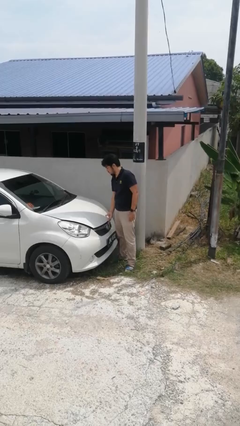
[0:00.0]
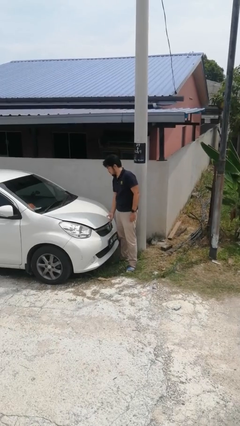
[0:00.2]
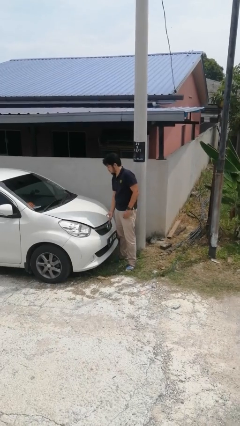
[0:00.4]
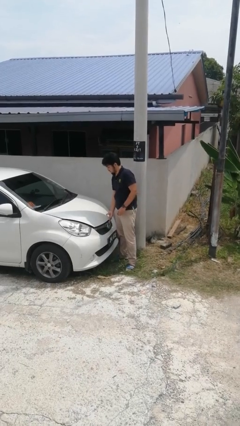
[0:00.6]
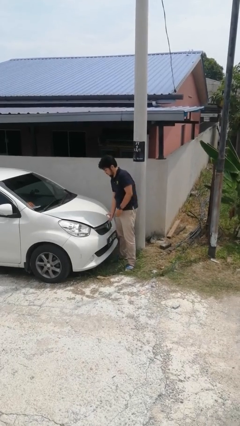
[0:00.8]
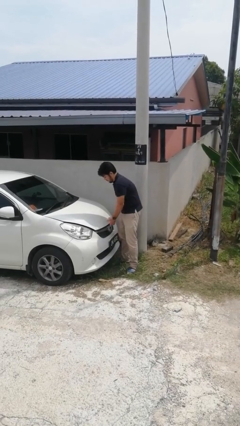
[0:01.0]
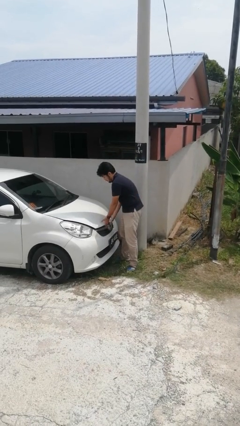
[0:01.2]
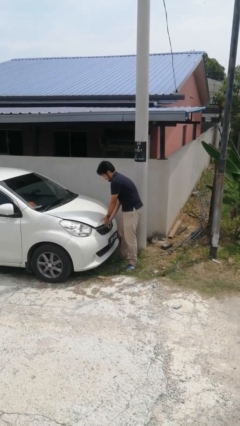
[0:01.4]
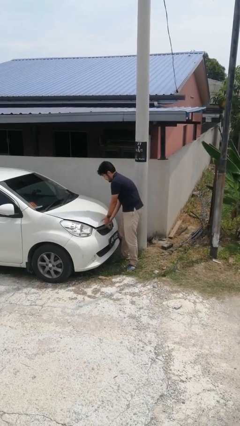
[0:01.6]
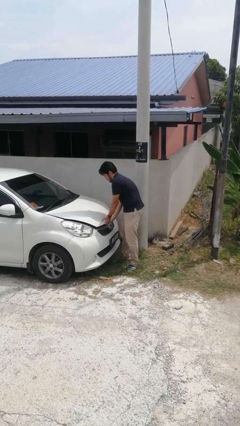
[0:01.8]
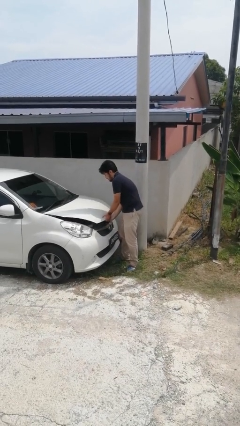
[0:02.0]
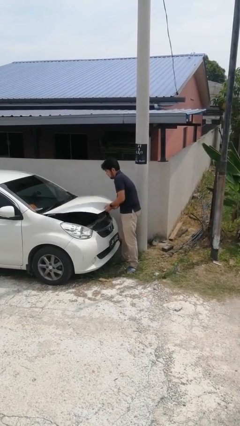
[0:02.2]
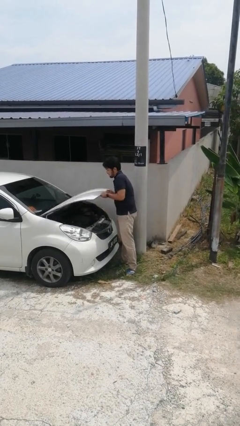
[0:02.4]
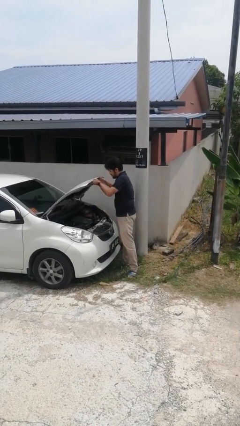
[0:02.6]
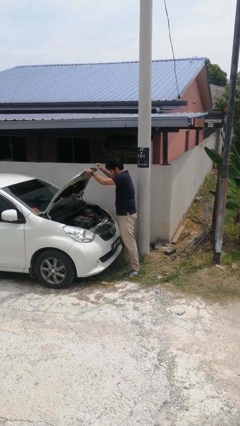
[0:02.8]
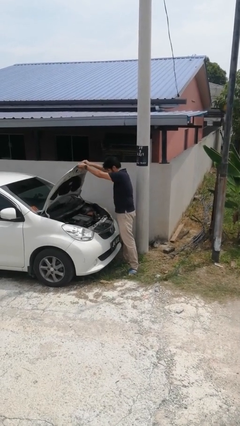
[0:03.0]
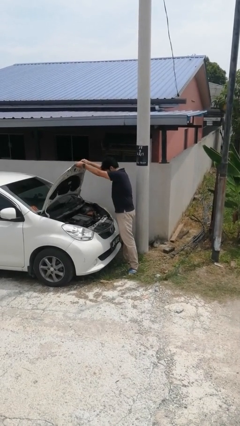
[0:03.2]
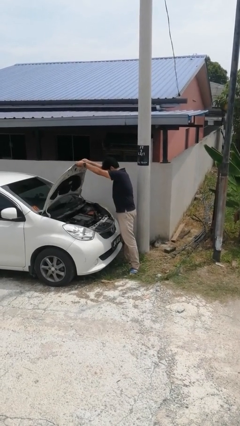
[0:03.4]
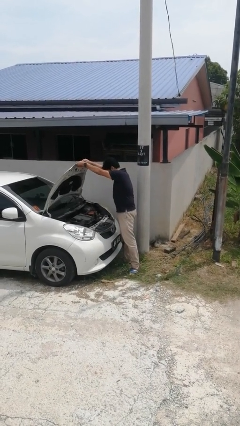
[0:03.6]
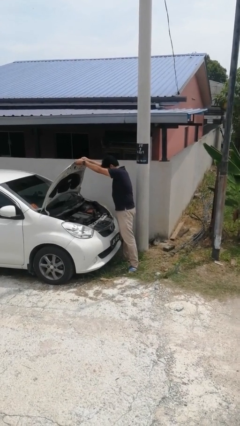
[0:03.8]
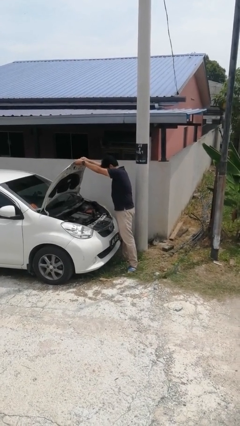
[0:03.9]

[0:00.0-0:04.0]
person opens car hood

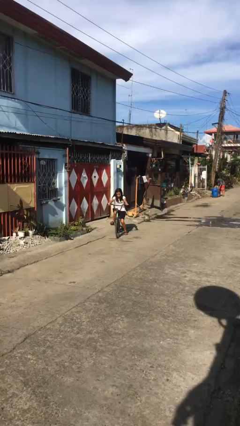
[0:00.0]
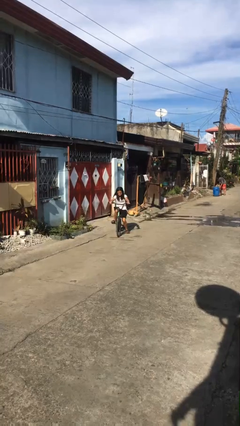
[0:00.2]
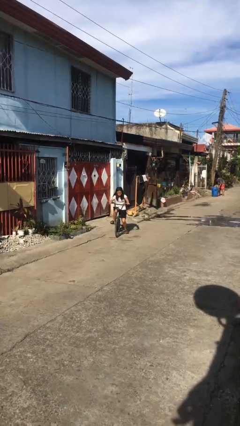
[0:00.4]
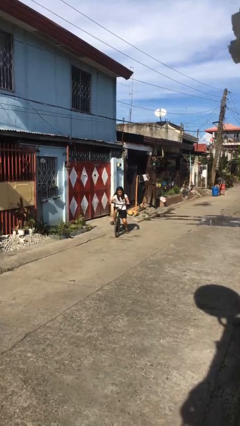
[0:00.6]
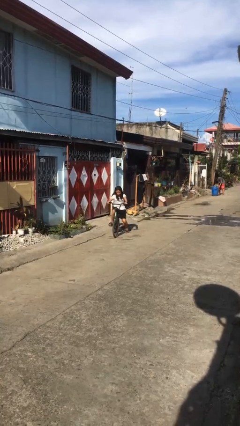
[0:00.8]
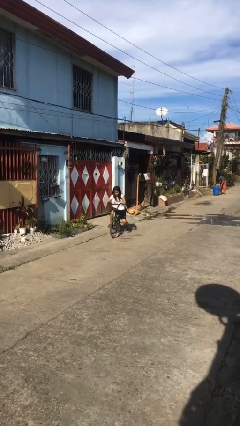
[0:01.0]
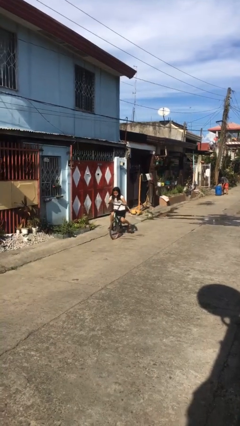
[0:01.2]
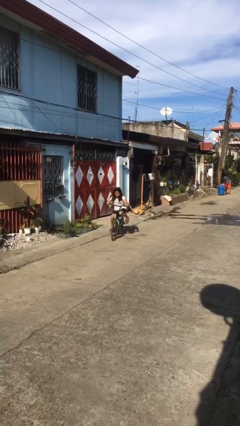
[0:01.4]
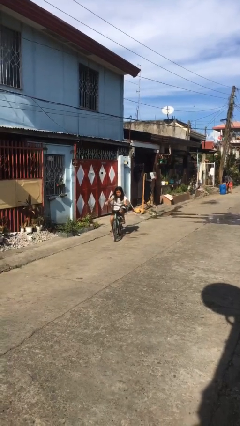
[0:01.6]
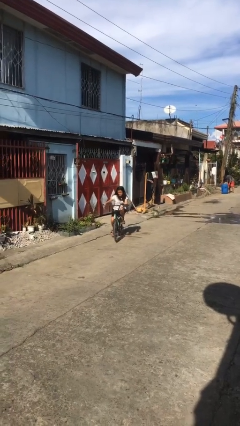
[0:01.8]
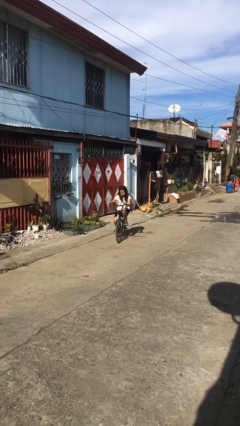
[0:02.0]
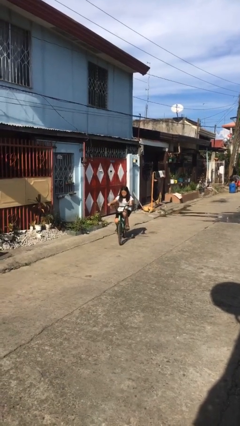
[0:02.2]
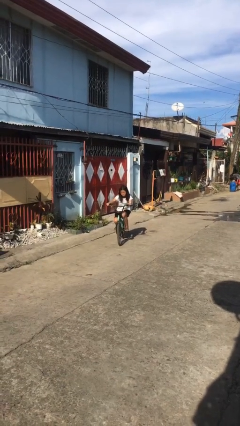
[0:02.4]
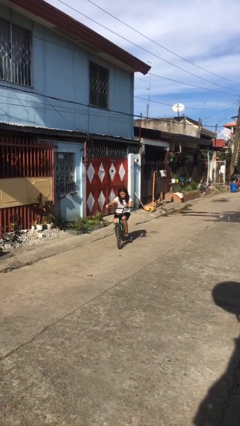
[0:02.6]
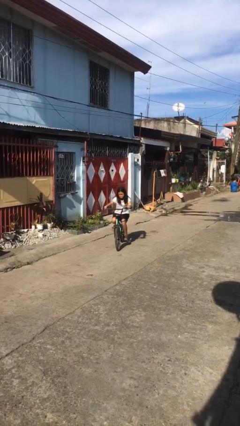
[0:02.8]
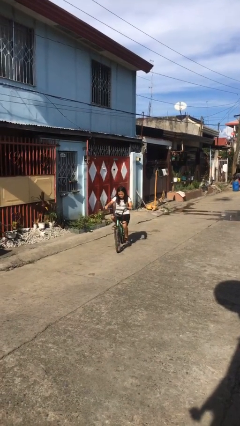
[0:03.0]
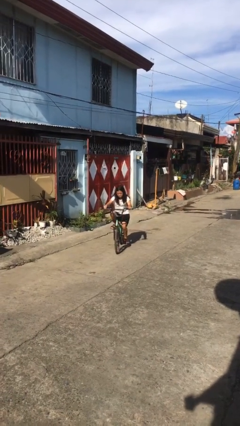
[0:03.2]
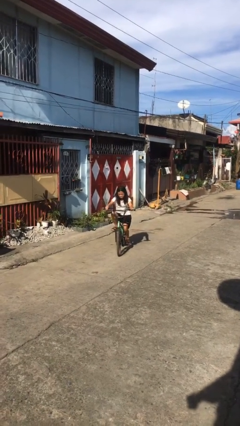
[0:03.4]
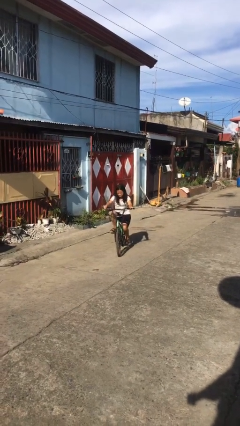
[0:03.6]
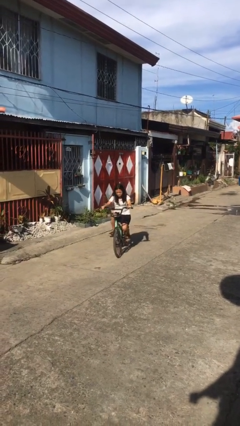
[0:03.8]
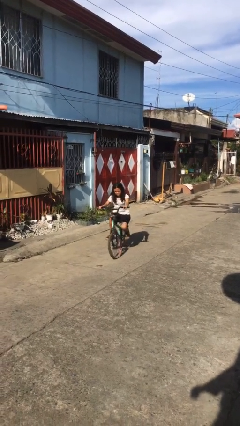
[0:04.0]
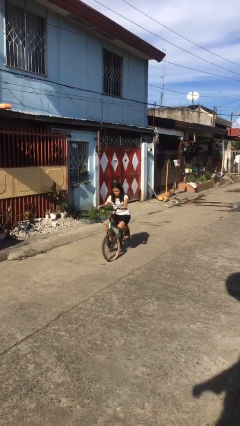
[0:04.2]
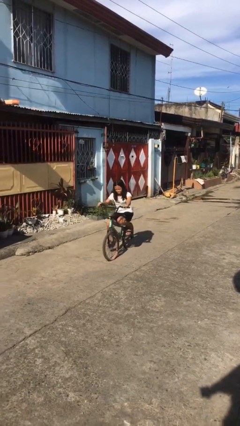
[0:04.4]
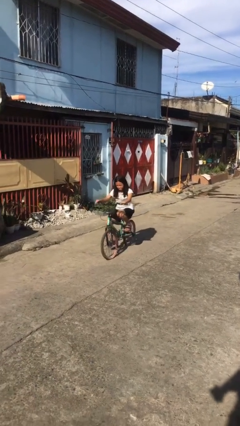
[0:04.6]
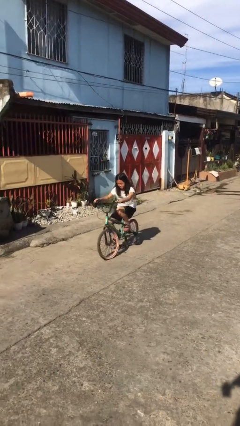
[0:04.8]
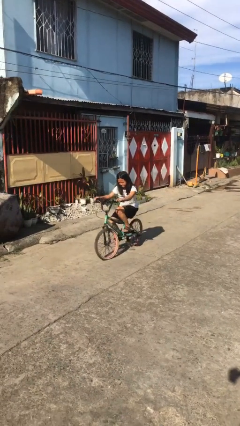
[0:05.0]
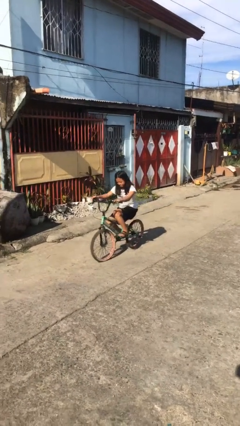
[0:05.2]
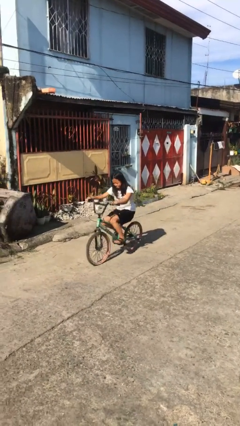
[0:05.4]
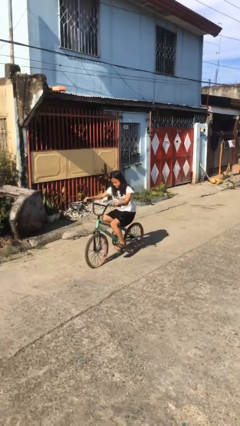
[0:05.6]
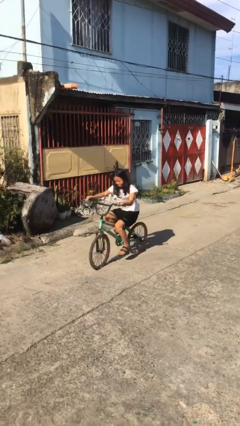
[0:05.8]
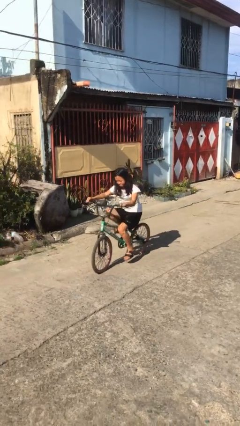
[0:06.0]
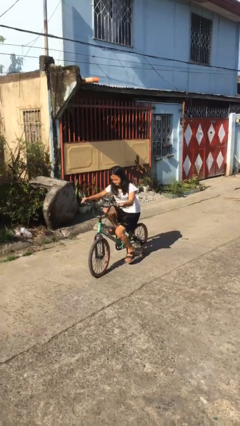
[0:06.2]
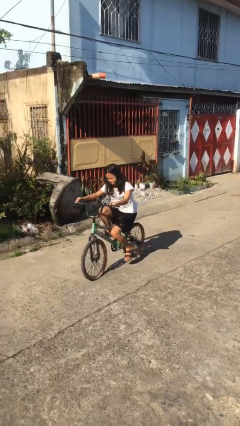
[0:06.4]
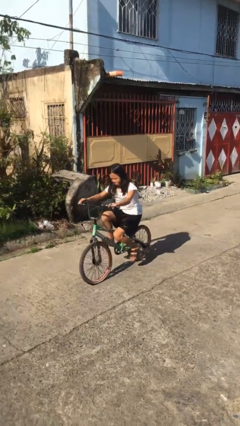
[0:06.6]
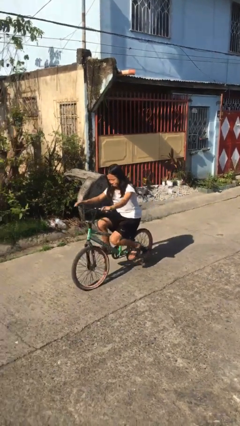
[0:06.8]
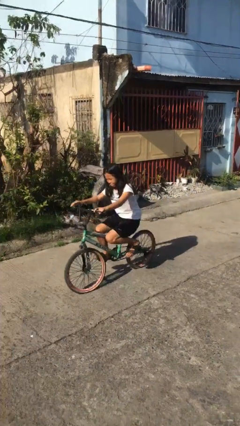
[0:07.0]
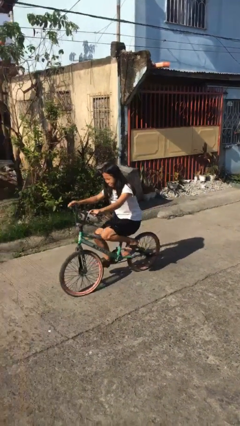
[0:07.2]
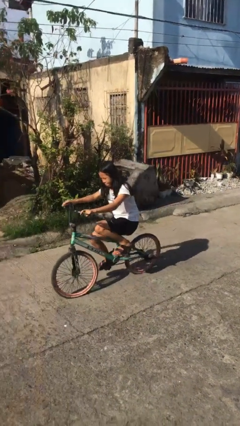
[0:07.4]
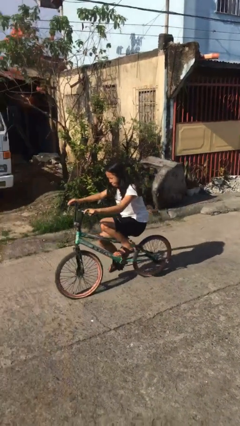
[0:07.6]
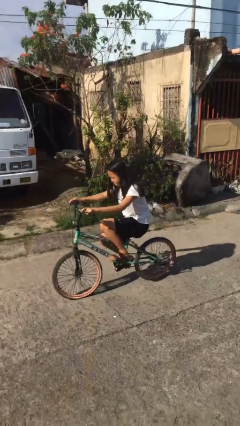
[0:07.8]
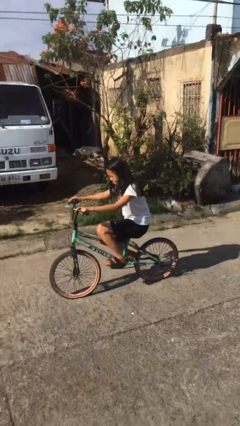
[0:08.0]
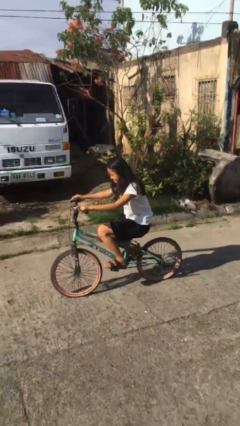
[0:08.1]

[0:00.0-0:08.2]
person rides bicycle

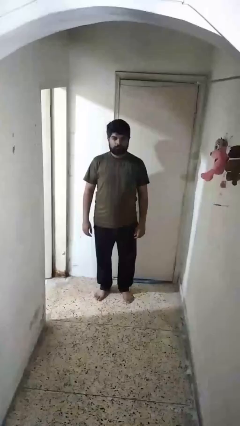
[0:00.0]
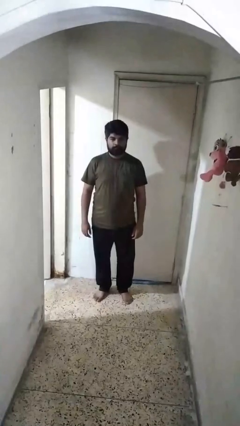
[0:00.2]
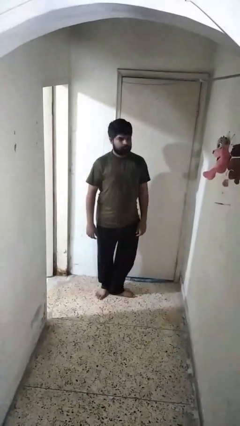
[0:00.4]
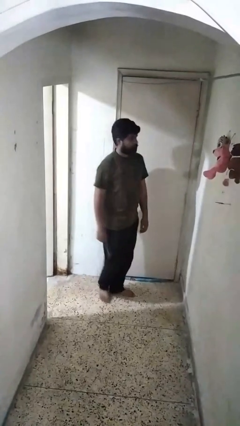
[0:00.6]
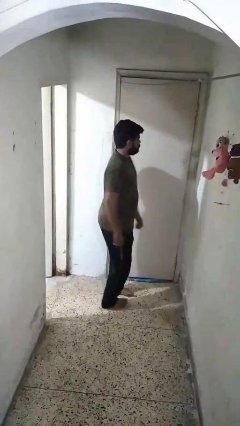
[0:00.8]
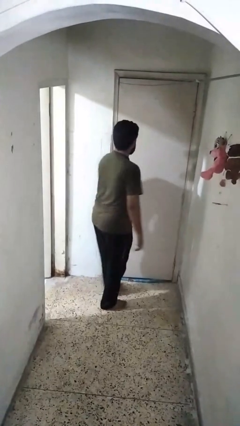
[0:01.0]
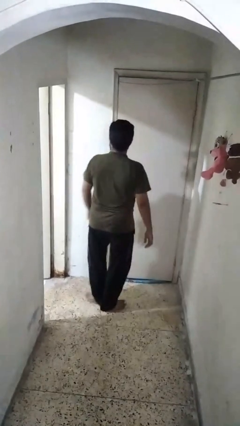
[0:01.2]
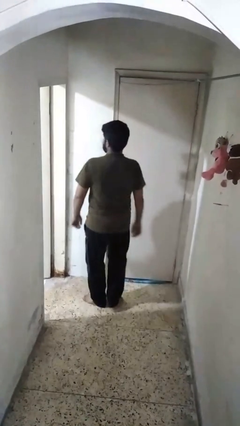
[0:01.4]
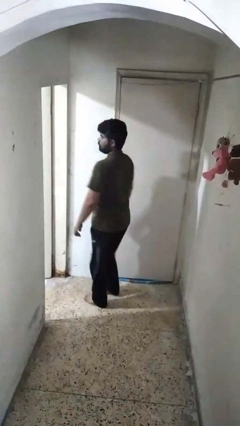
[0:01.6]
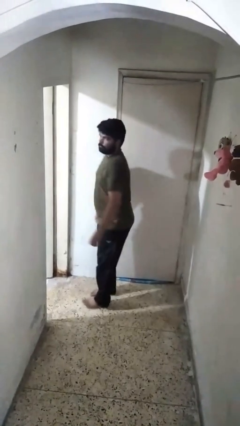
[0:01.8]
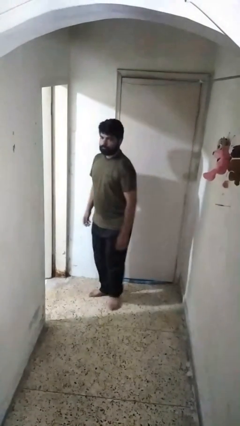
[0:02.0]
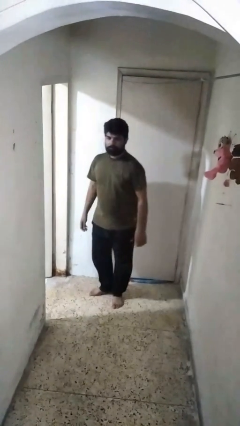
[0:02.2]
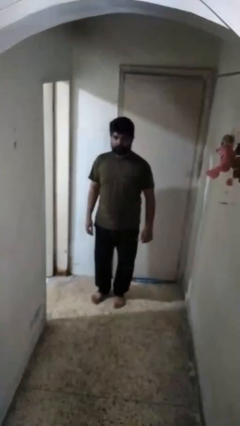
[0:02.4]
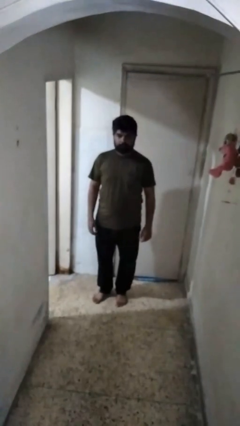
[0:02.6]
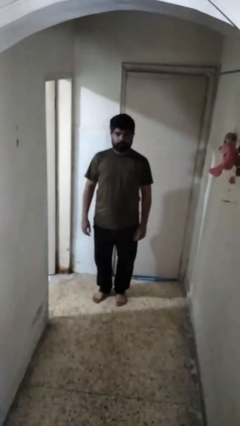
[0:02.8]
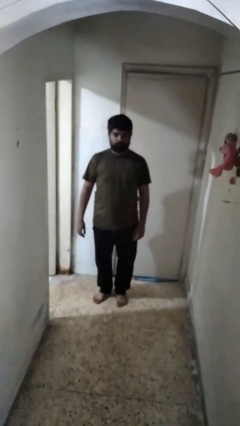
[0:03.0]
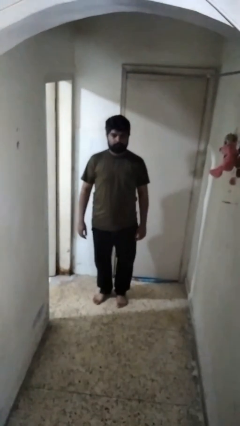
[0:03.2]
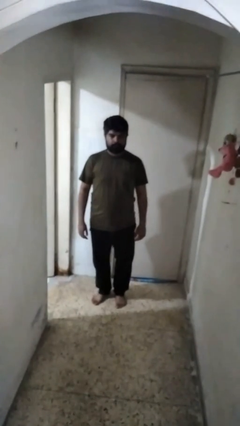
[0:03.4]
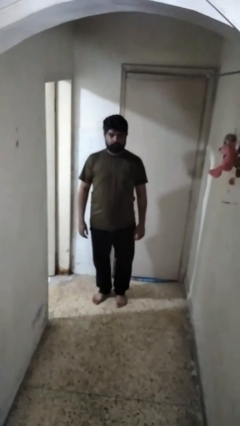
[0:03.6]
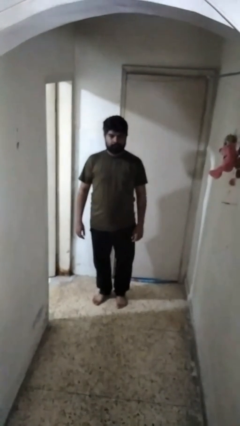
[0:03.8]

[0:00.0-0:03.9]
person twirls

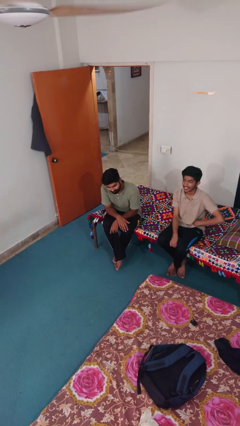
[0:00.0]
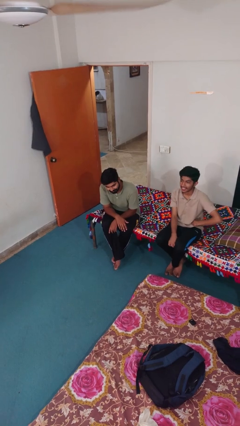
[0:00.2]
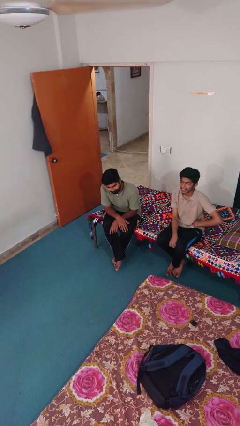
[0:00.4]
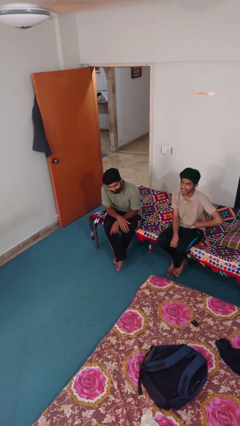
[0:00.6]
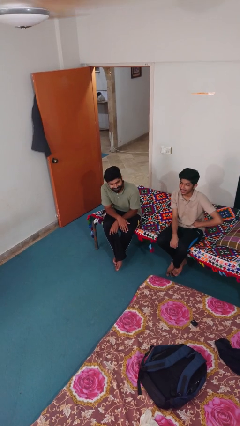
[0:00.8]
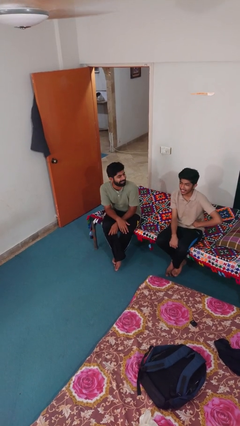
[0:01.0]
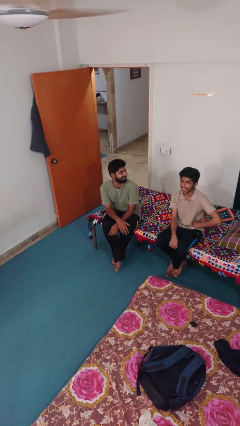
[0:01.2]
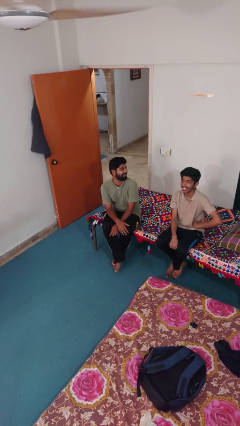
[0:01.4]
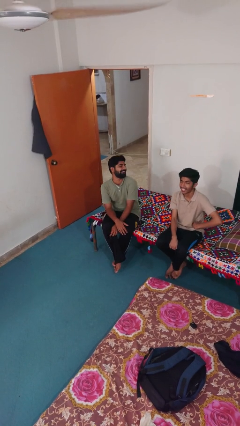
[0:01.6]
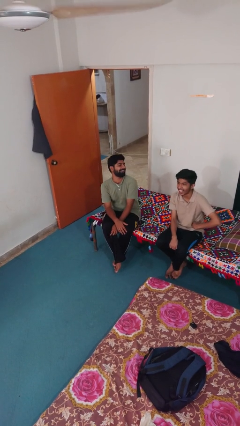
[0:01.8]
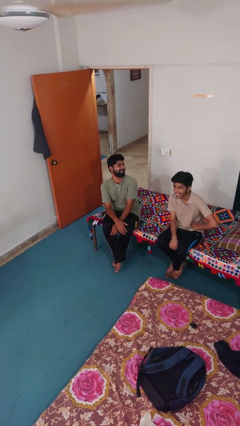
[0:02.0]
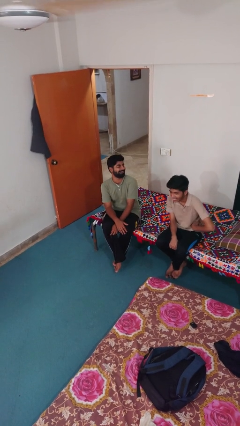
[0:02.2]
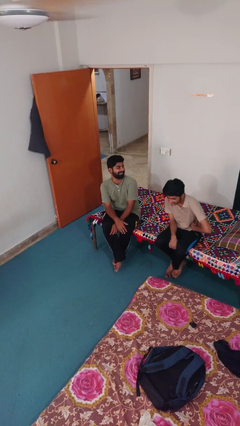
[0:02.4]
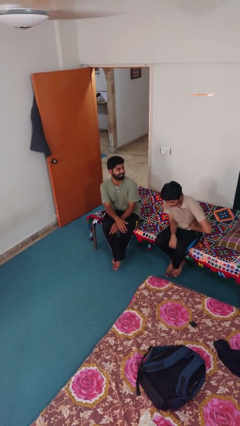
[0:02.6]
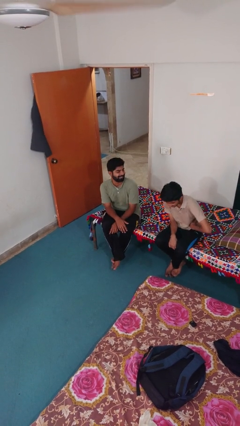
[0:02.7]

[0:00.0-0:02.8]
person laughs with person
